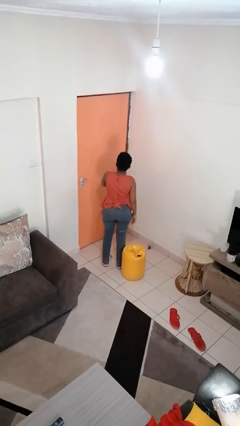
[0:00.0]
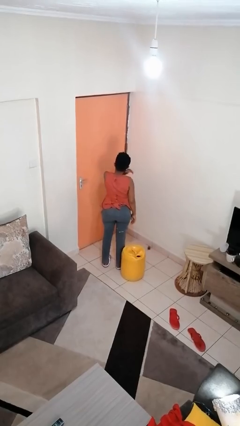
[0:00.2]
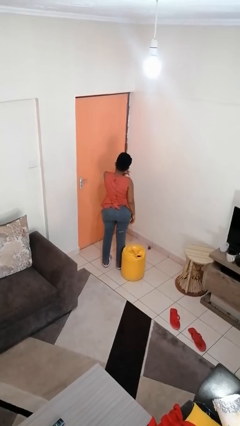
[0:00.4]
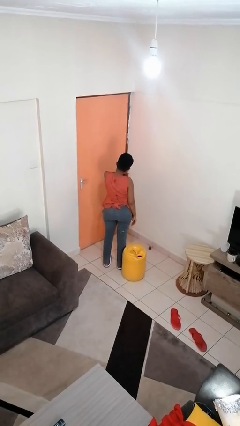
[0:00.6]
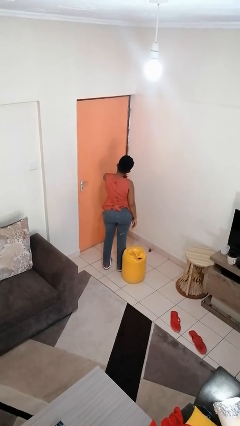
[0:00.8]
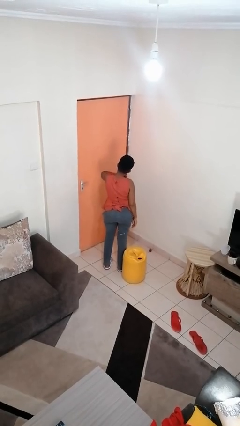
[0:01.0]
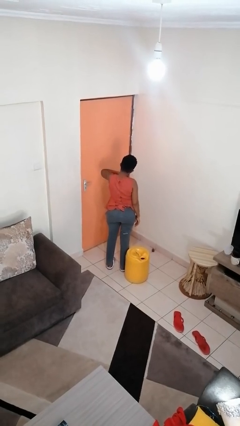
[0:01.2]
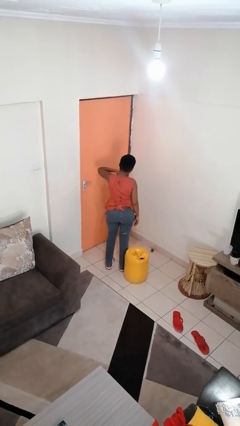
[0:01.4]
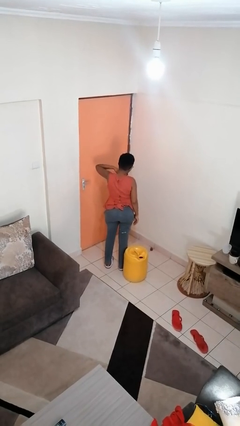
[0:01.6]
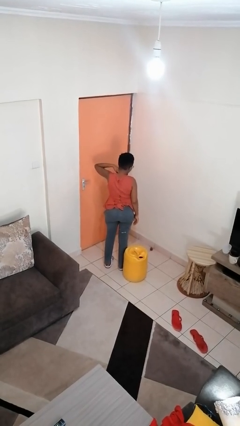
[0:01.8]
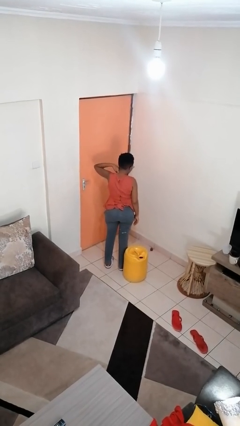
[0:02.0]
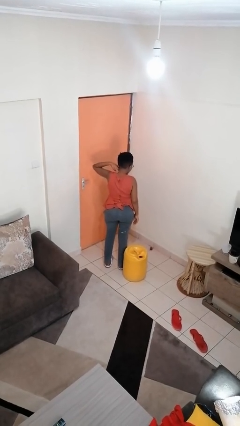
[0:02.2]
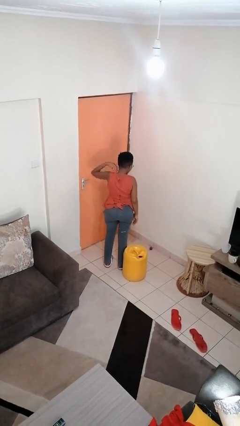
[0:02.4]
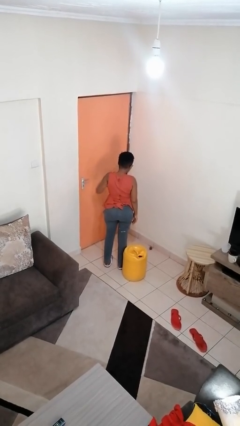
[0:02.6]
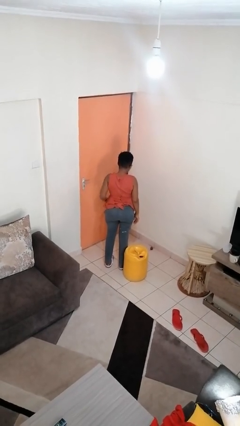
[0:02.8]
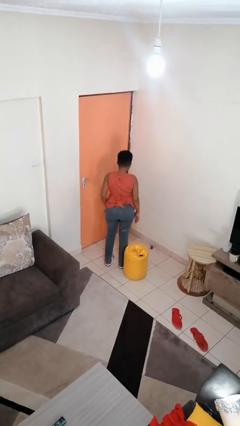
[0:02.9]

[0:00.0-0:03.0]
person gestures cut

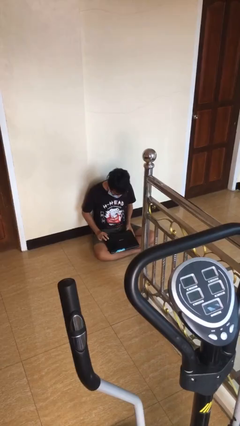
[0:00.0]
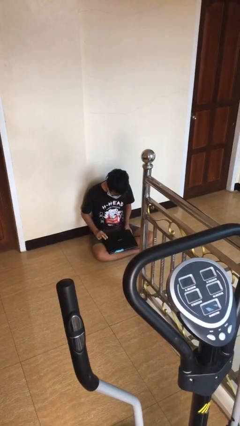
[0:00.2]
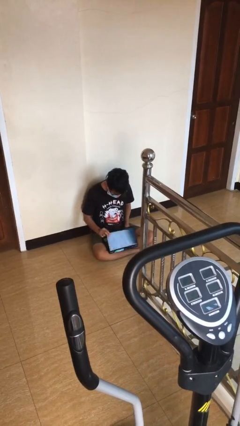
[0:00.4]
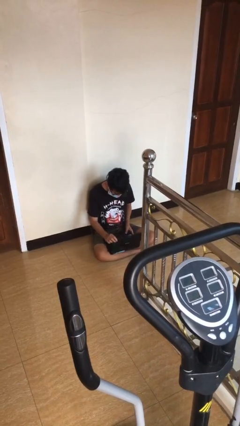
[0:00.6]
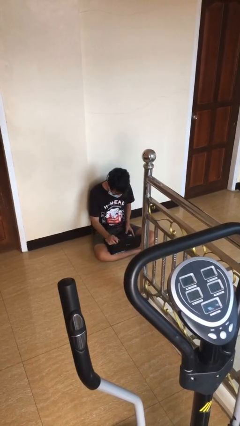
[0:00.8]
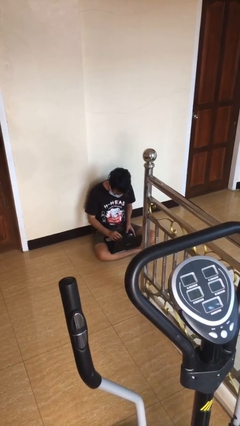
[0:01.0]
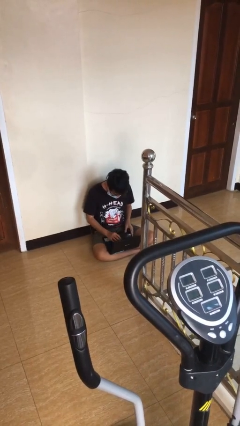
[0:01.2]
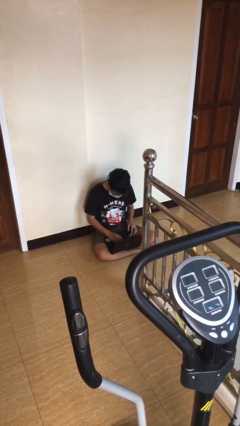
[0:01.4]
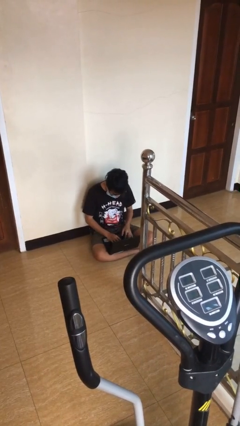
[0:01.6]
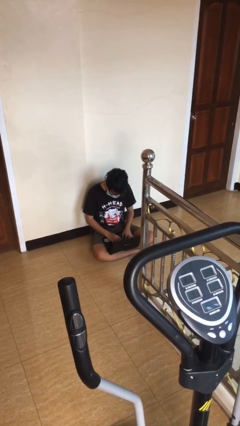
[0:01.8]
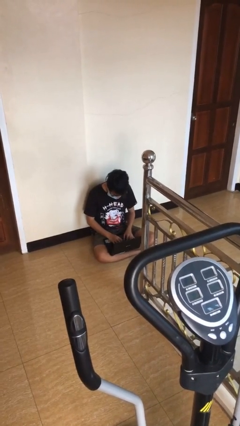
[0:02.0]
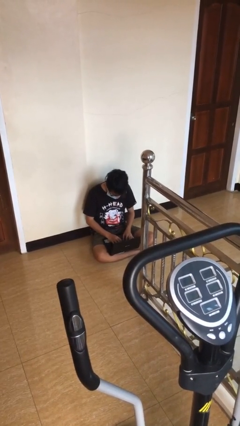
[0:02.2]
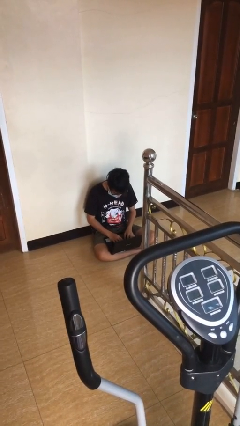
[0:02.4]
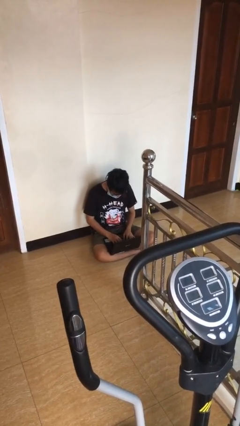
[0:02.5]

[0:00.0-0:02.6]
person interacts with laptop

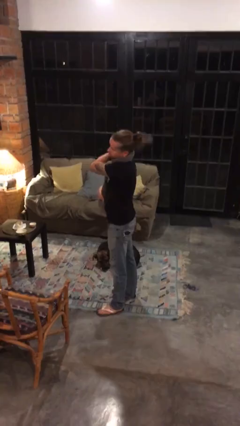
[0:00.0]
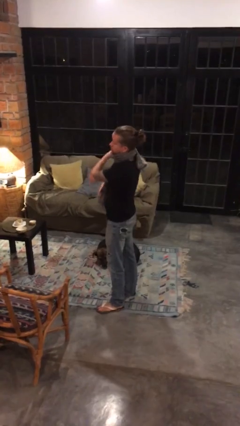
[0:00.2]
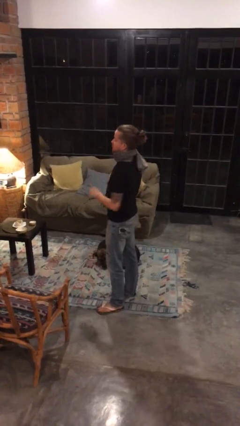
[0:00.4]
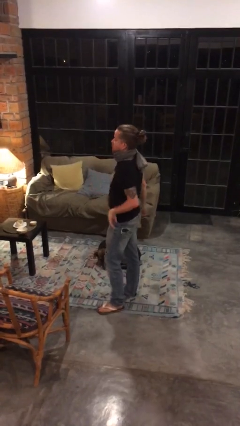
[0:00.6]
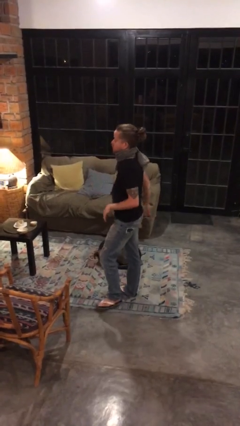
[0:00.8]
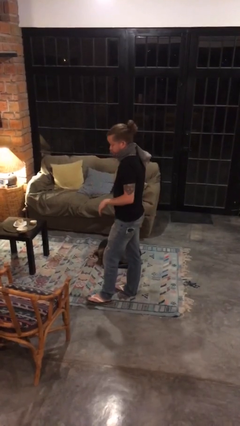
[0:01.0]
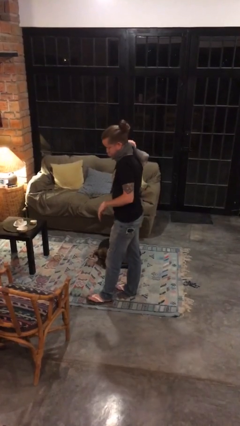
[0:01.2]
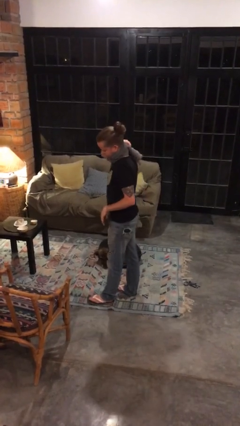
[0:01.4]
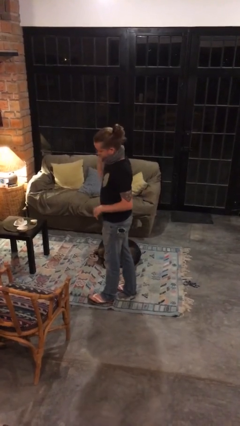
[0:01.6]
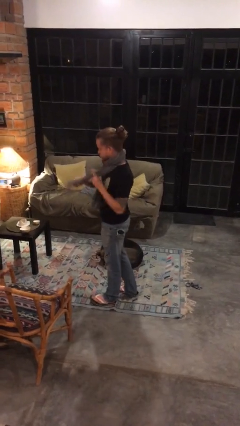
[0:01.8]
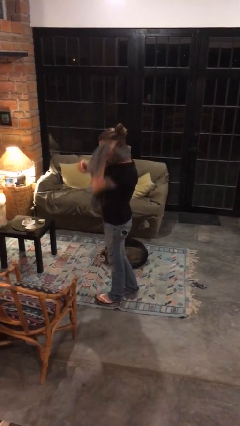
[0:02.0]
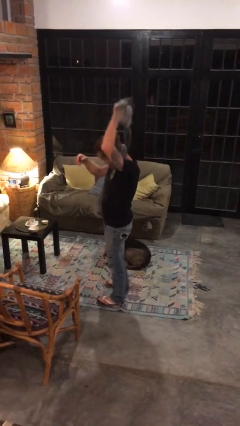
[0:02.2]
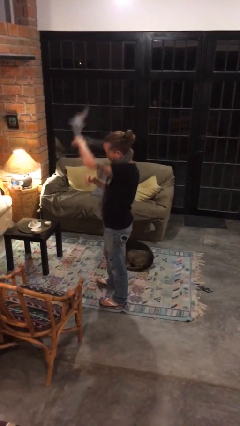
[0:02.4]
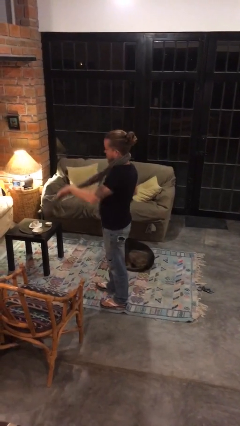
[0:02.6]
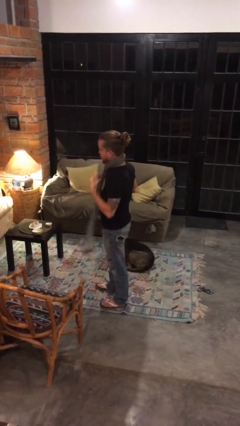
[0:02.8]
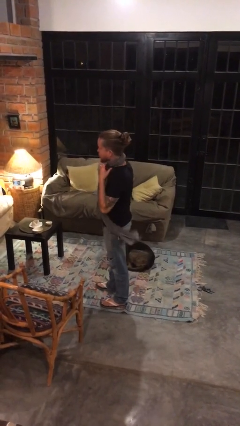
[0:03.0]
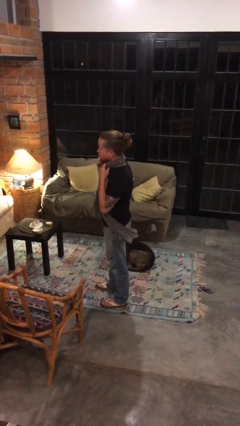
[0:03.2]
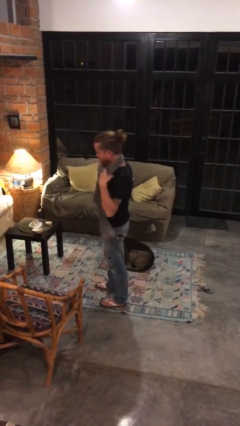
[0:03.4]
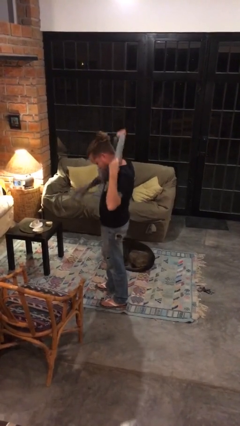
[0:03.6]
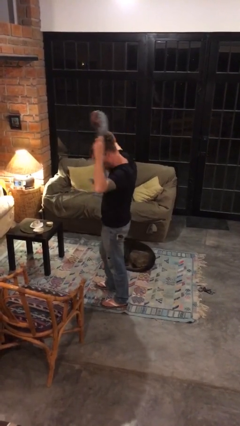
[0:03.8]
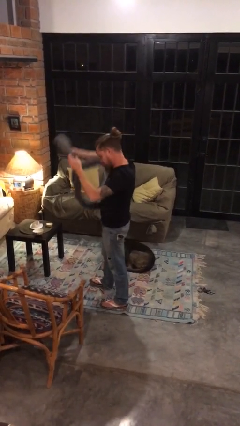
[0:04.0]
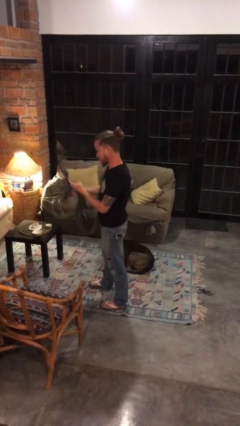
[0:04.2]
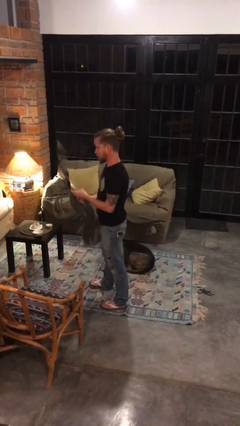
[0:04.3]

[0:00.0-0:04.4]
person takes off scarf

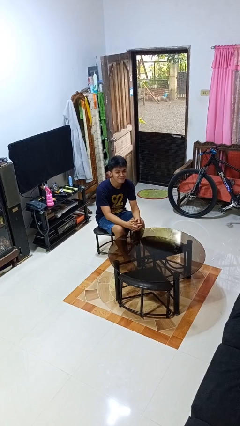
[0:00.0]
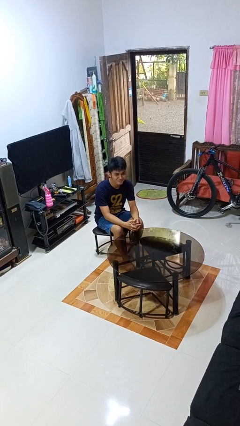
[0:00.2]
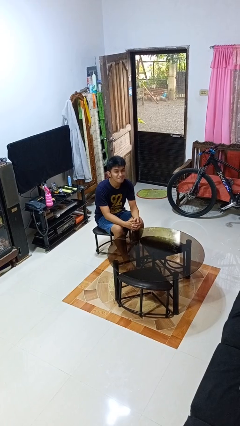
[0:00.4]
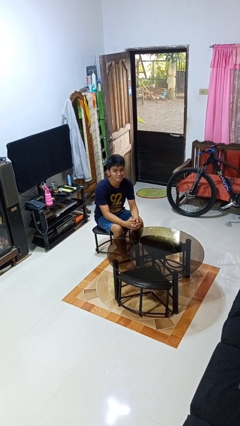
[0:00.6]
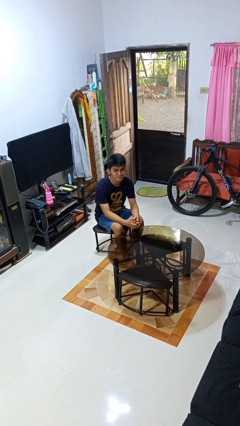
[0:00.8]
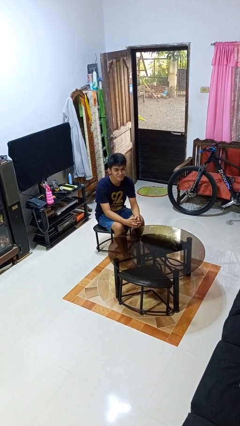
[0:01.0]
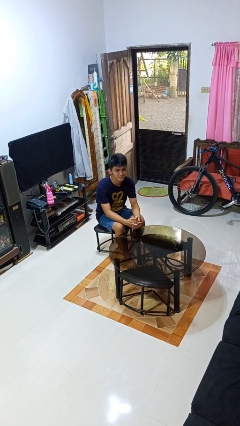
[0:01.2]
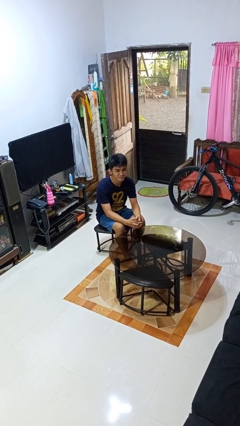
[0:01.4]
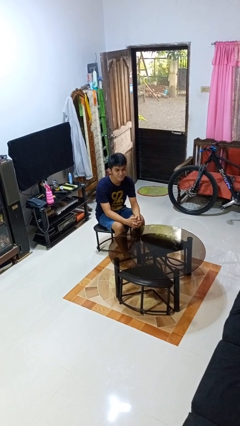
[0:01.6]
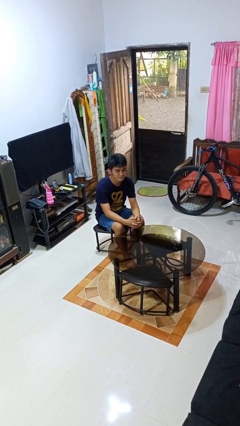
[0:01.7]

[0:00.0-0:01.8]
person nods head

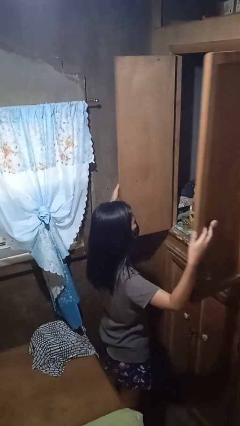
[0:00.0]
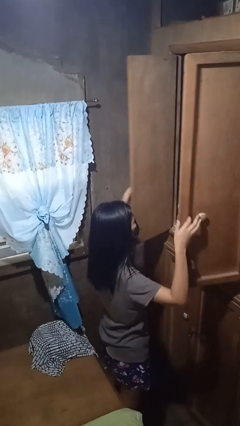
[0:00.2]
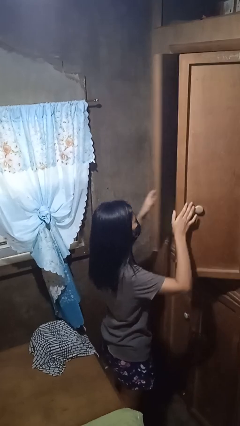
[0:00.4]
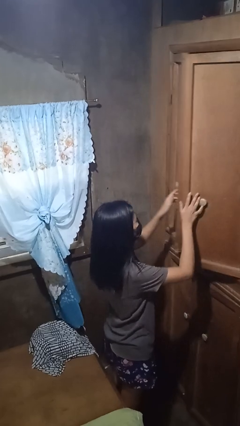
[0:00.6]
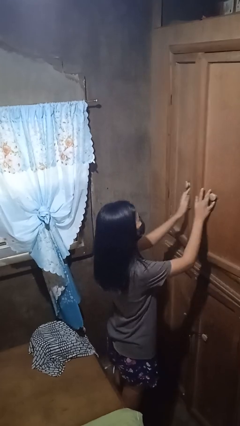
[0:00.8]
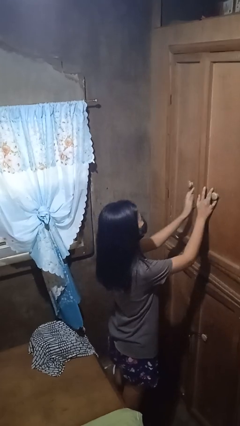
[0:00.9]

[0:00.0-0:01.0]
person closes closet door

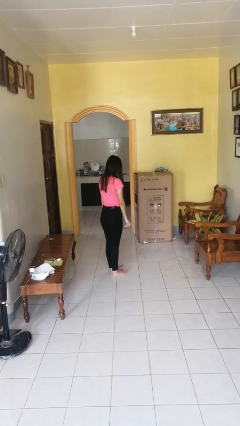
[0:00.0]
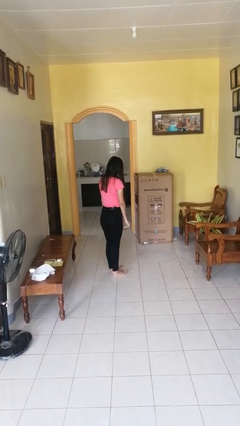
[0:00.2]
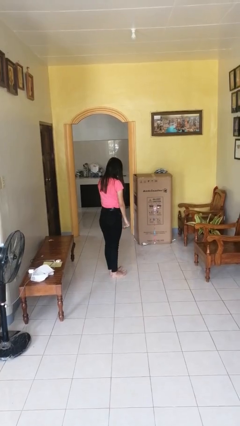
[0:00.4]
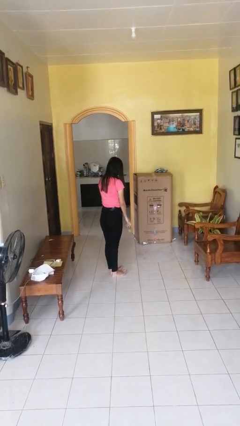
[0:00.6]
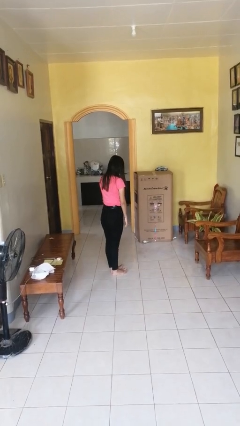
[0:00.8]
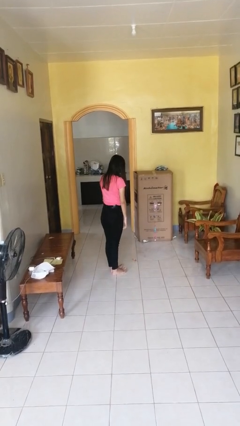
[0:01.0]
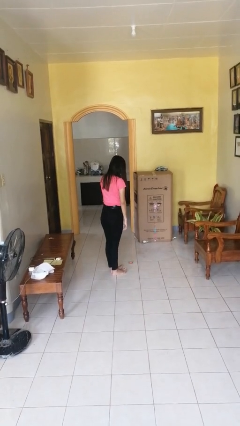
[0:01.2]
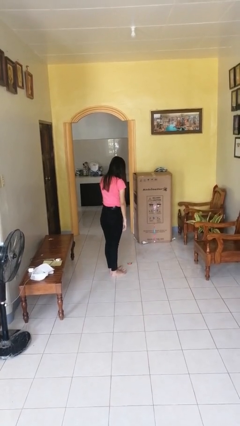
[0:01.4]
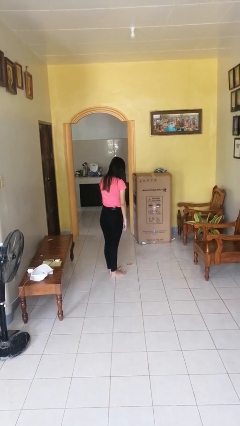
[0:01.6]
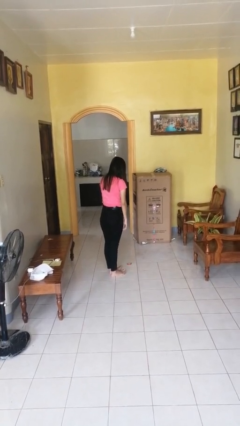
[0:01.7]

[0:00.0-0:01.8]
person throws object to ground

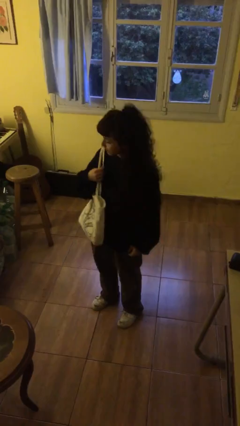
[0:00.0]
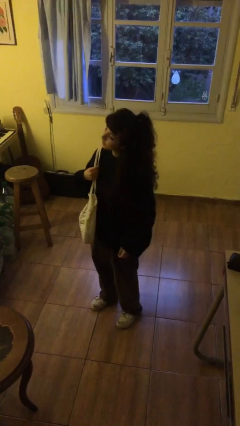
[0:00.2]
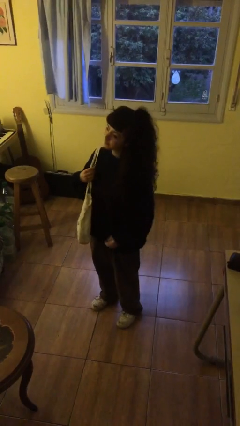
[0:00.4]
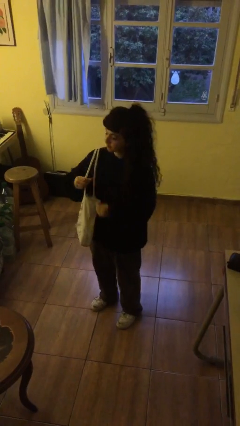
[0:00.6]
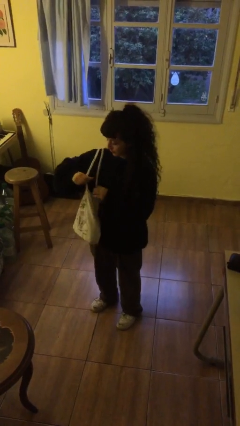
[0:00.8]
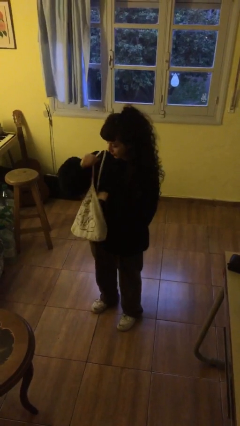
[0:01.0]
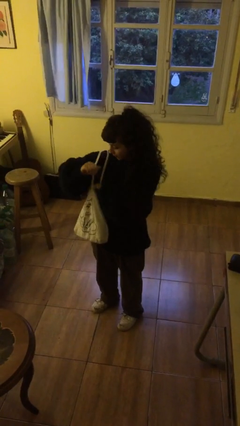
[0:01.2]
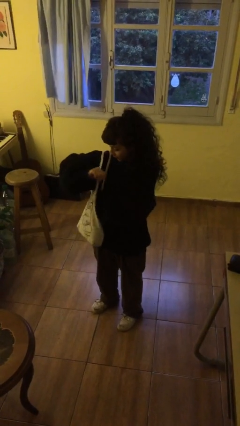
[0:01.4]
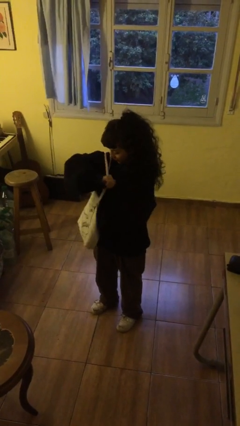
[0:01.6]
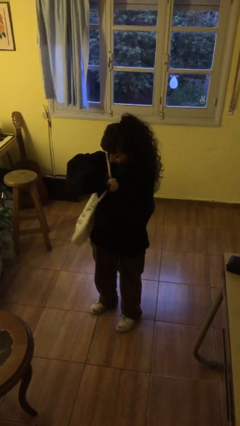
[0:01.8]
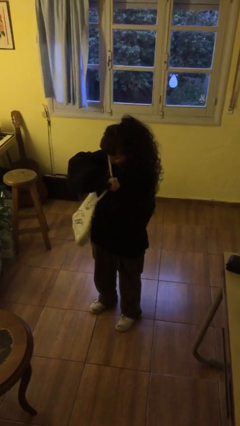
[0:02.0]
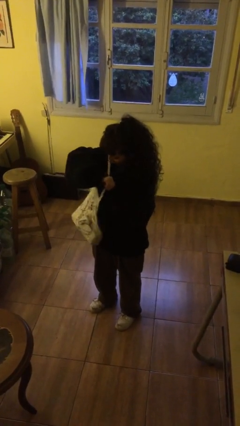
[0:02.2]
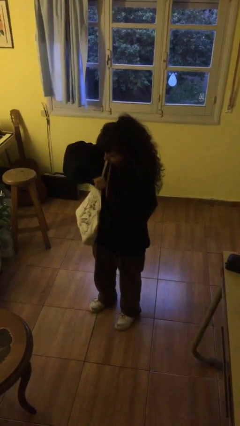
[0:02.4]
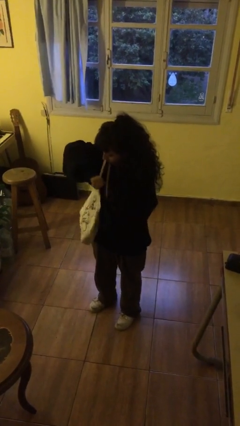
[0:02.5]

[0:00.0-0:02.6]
person searches in purse
